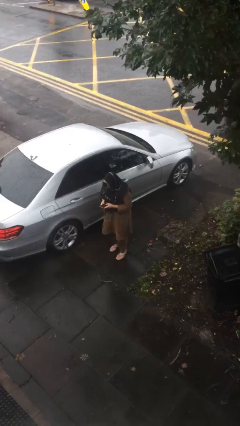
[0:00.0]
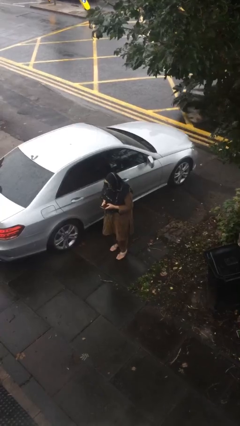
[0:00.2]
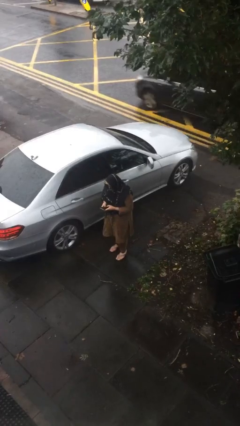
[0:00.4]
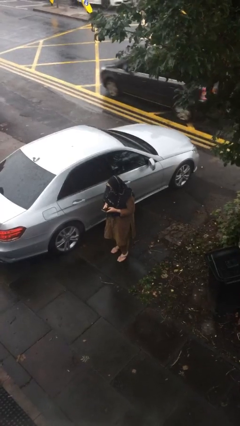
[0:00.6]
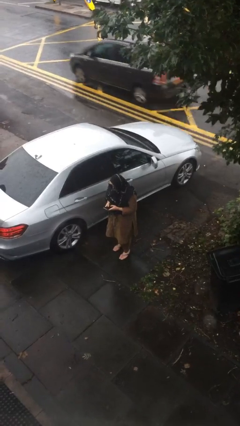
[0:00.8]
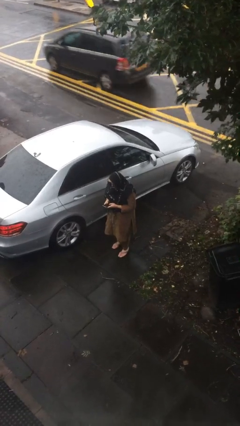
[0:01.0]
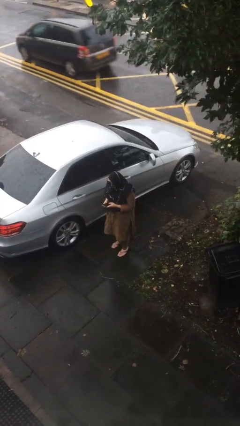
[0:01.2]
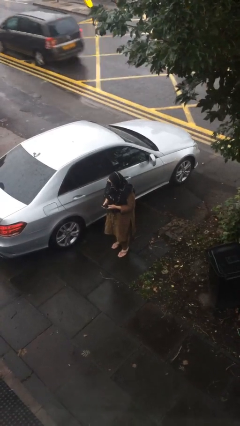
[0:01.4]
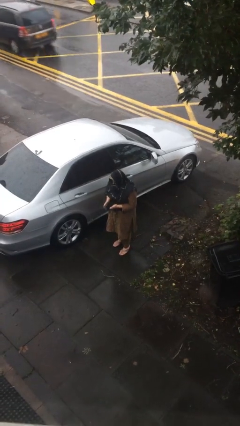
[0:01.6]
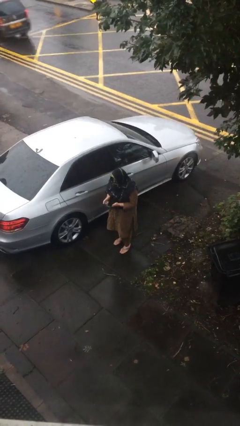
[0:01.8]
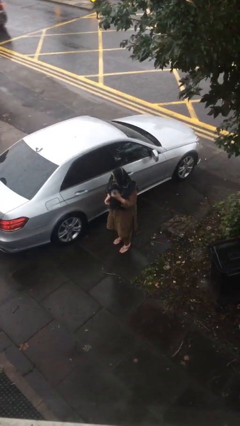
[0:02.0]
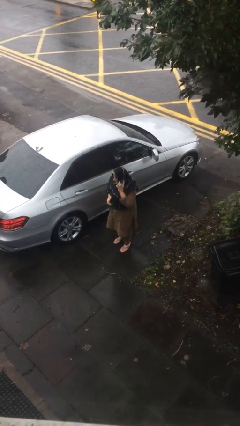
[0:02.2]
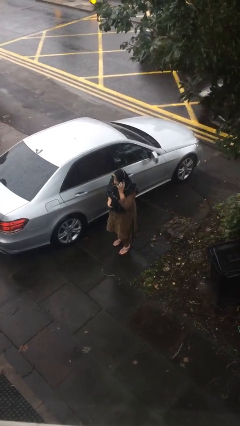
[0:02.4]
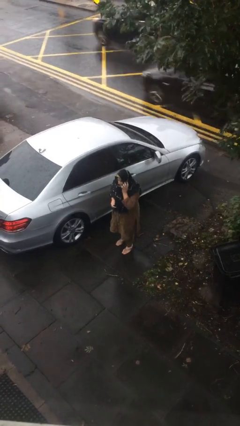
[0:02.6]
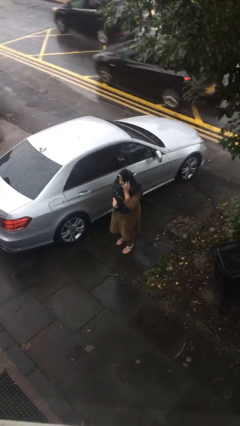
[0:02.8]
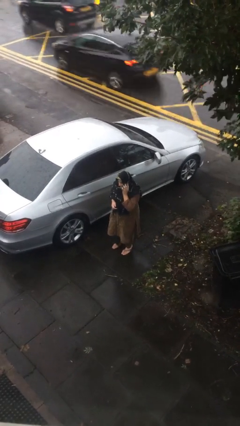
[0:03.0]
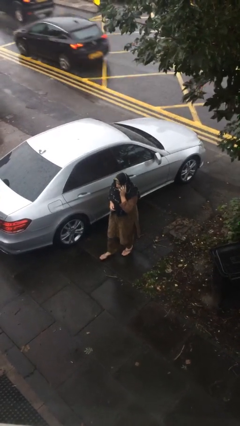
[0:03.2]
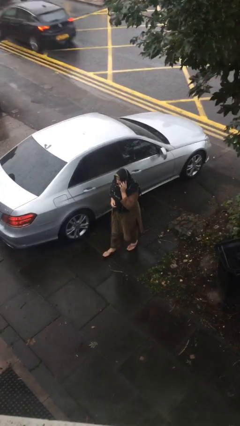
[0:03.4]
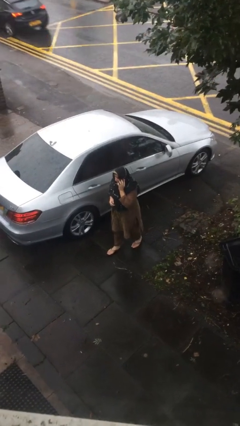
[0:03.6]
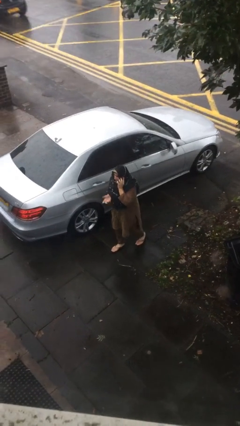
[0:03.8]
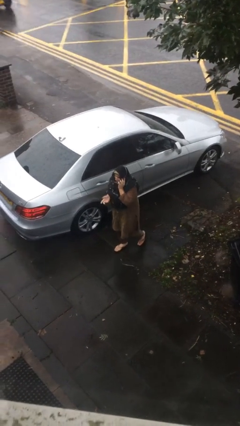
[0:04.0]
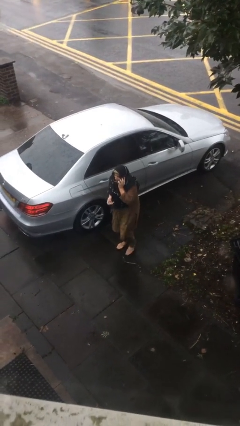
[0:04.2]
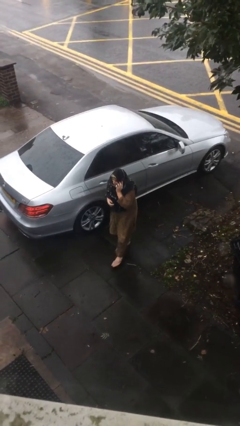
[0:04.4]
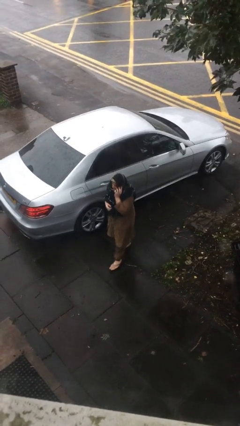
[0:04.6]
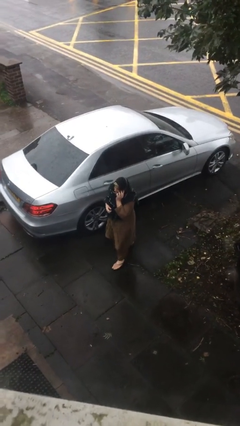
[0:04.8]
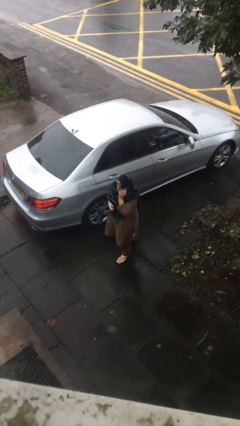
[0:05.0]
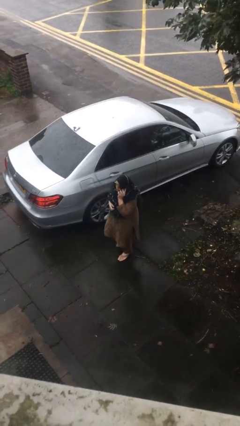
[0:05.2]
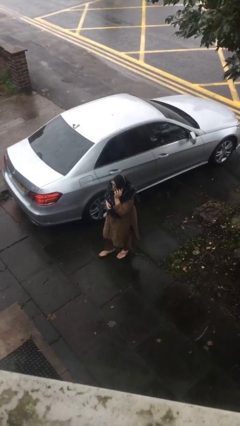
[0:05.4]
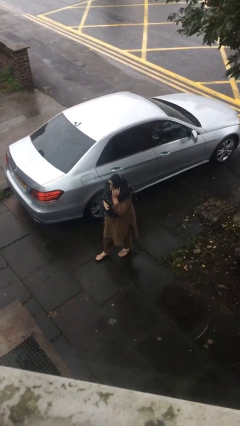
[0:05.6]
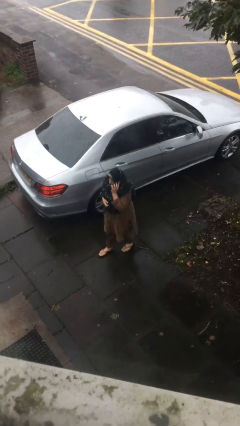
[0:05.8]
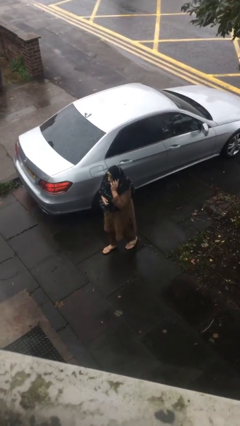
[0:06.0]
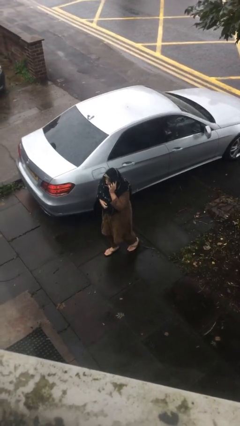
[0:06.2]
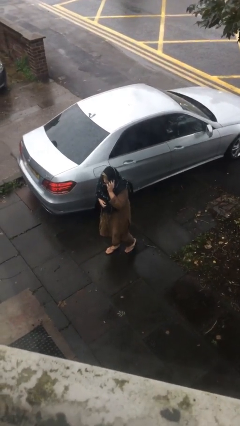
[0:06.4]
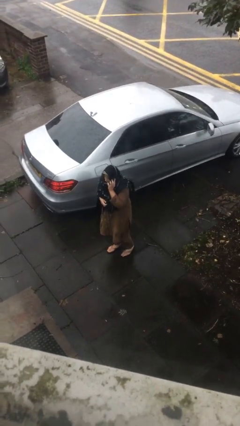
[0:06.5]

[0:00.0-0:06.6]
person talks on phone

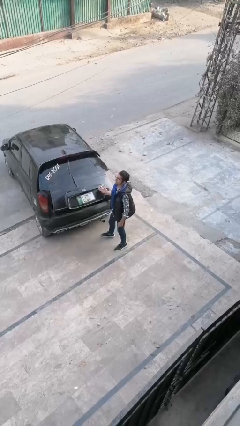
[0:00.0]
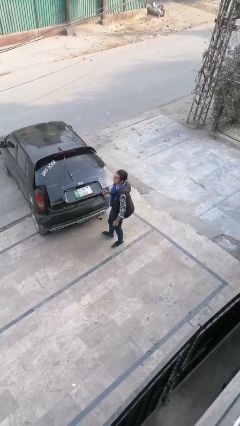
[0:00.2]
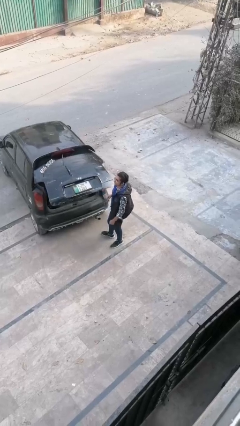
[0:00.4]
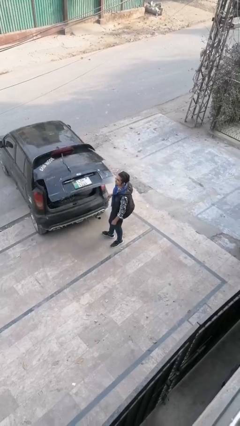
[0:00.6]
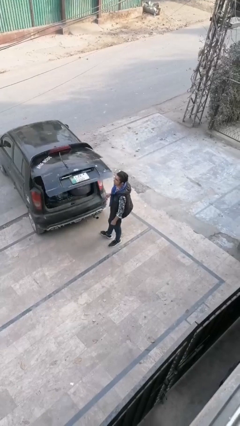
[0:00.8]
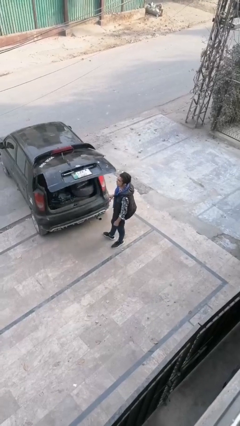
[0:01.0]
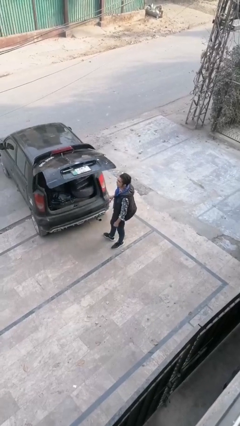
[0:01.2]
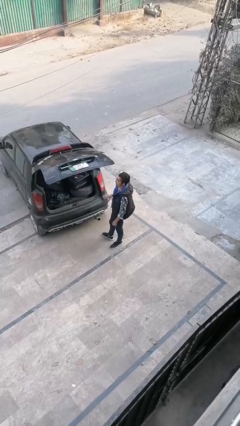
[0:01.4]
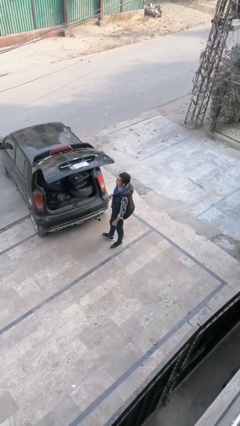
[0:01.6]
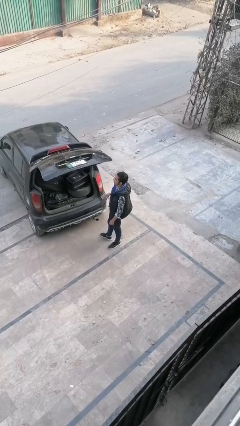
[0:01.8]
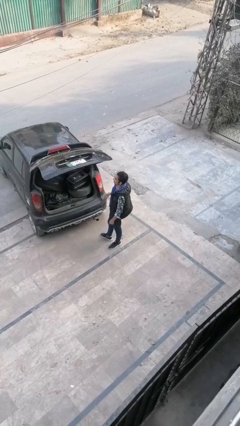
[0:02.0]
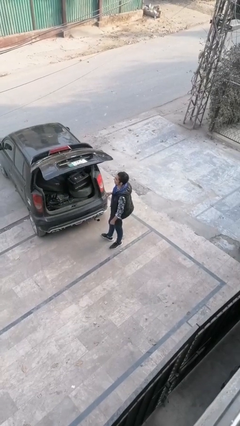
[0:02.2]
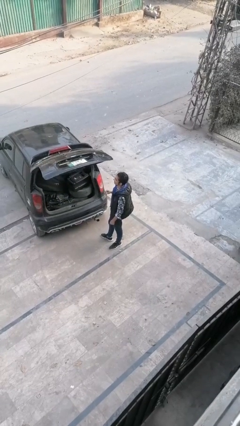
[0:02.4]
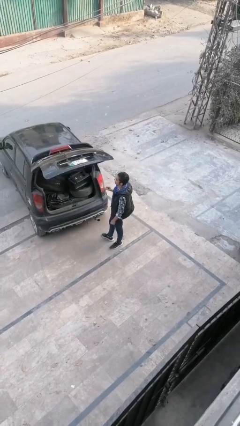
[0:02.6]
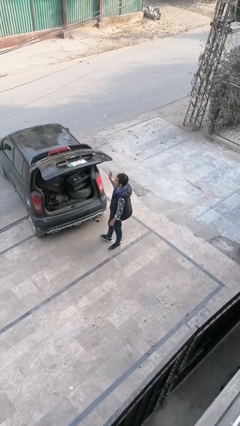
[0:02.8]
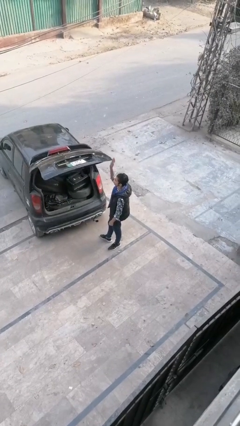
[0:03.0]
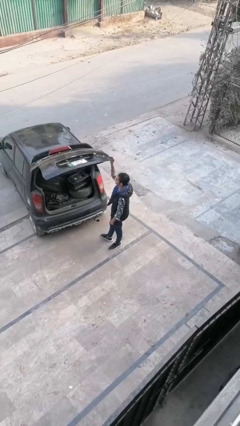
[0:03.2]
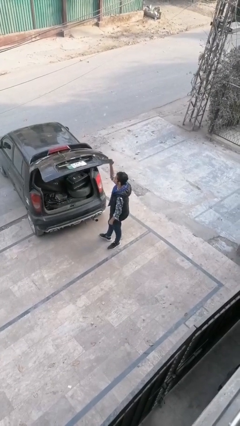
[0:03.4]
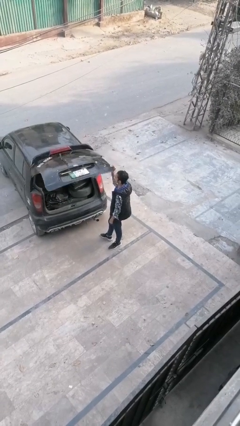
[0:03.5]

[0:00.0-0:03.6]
person opens car trunk

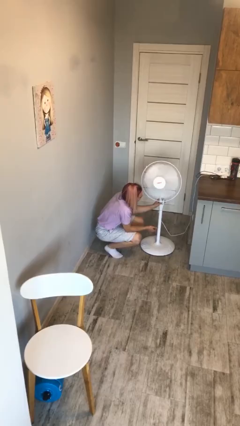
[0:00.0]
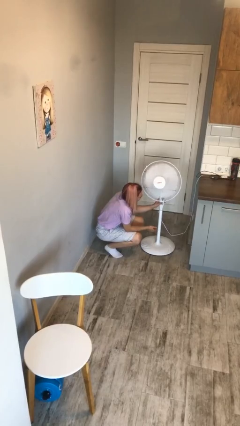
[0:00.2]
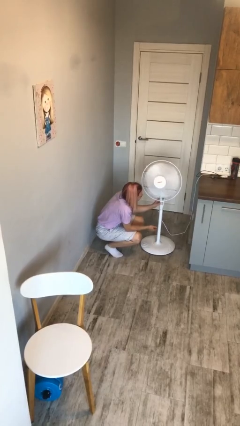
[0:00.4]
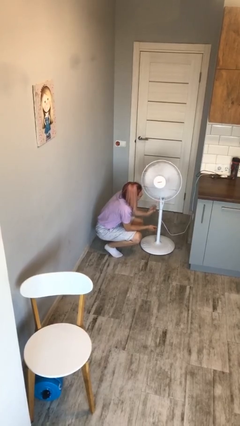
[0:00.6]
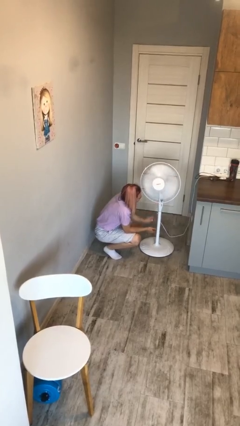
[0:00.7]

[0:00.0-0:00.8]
person turns off fan

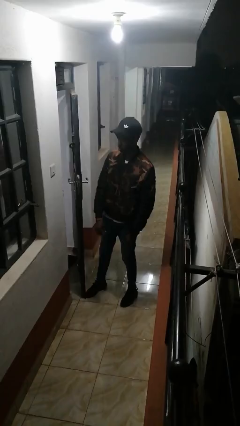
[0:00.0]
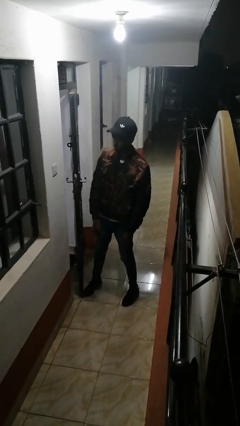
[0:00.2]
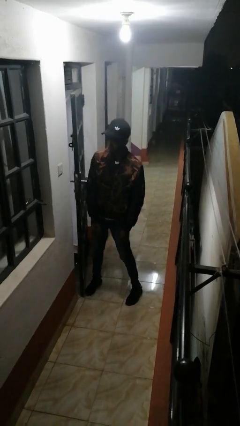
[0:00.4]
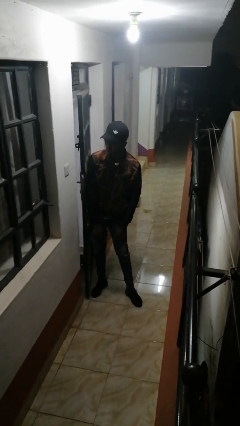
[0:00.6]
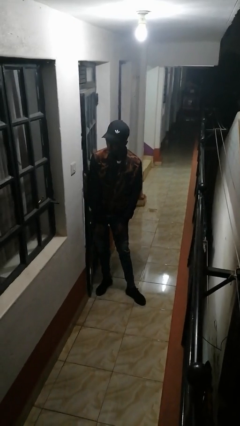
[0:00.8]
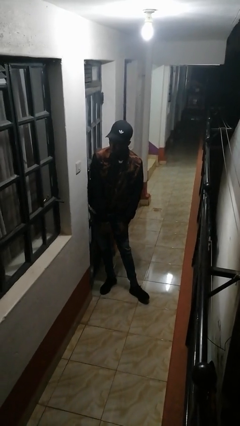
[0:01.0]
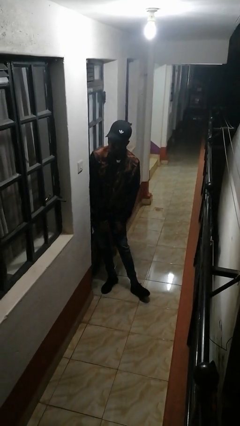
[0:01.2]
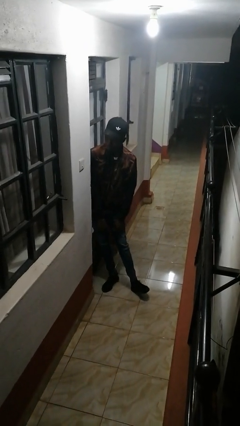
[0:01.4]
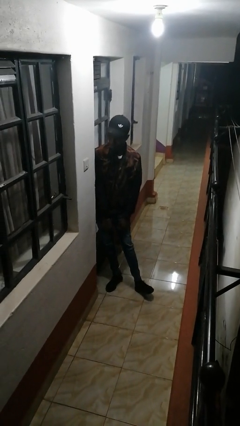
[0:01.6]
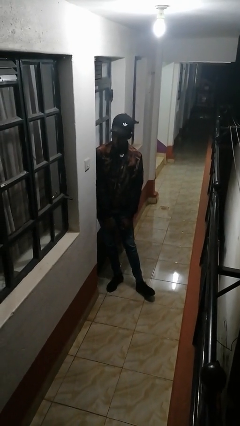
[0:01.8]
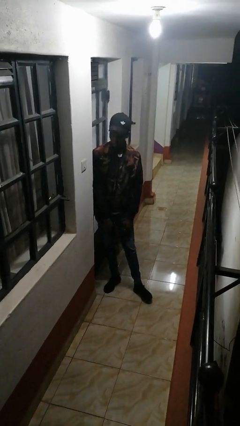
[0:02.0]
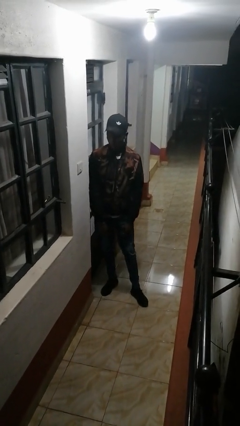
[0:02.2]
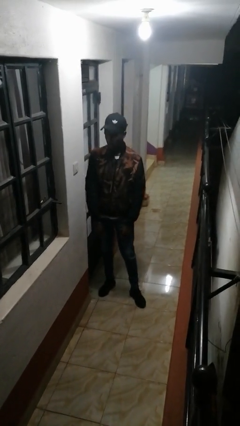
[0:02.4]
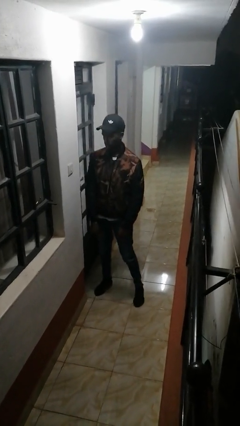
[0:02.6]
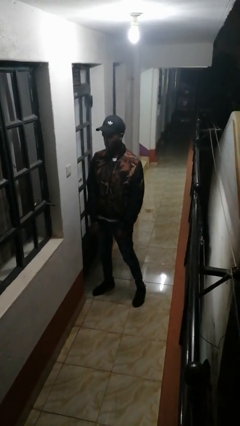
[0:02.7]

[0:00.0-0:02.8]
person closes door with hip

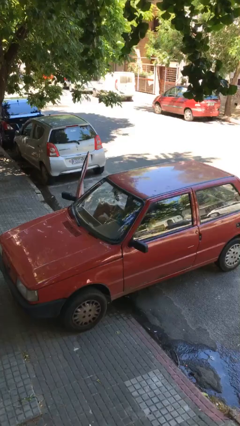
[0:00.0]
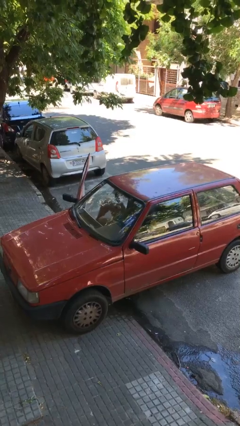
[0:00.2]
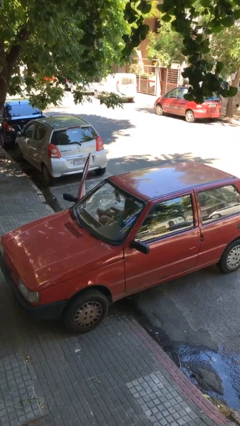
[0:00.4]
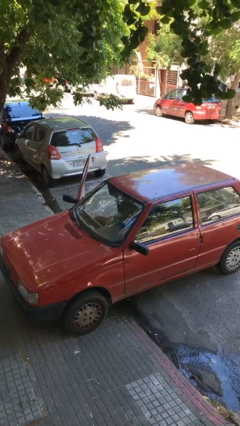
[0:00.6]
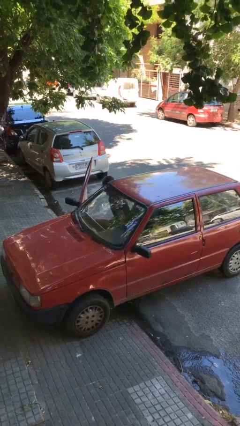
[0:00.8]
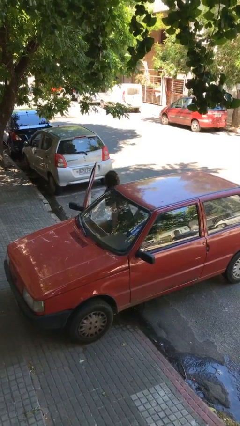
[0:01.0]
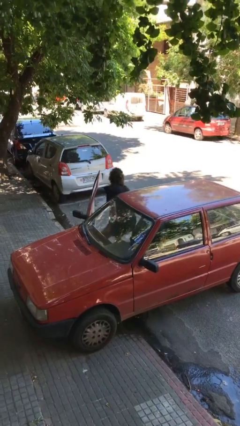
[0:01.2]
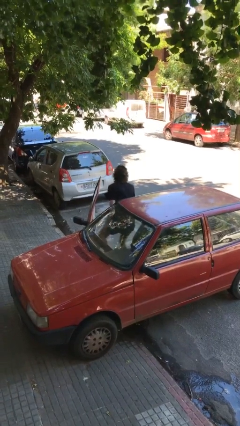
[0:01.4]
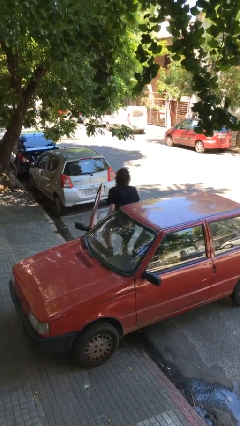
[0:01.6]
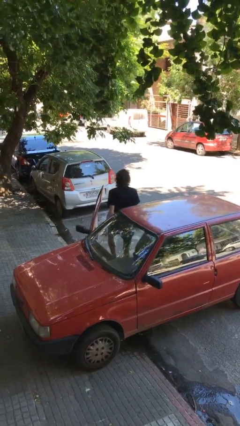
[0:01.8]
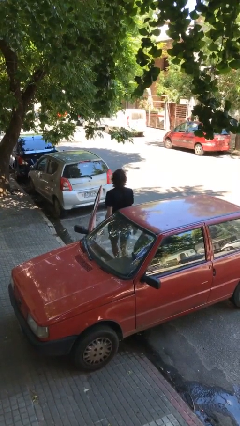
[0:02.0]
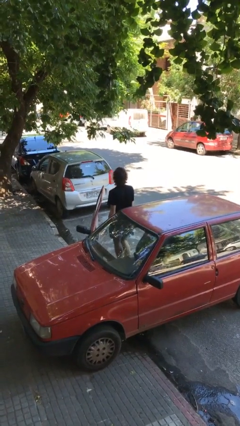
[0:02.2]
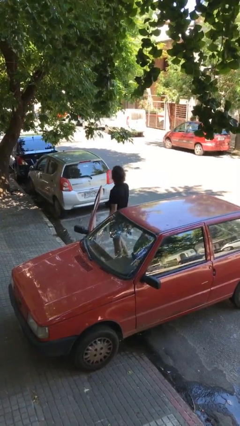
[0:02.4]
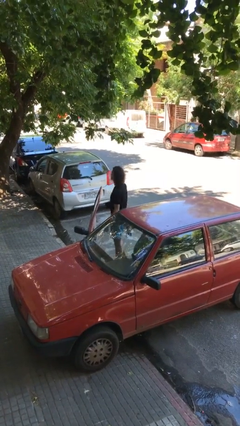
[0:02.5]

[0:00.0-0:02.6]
person exits car

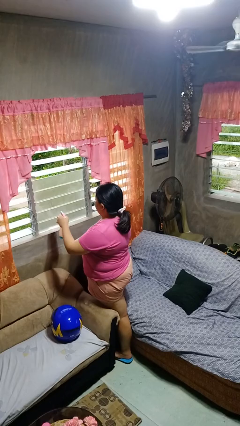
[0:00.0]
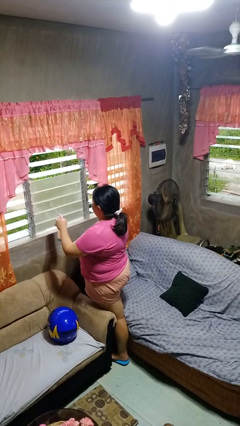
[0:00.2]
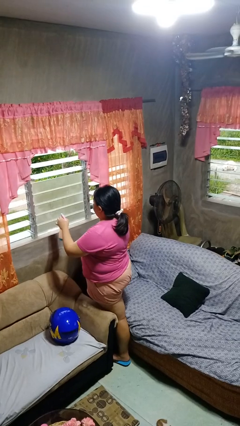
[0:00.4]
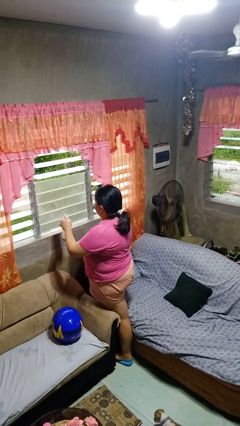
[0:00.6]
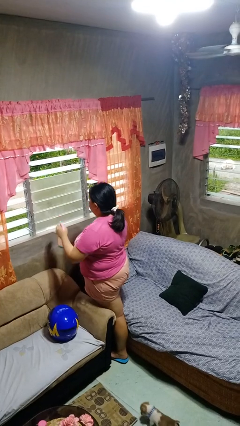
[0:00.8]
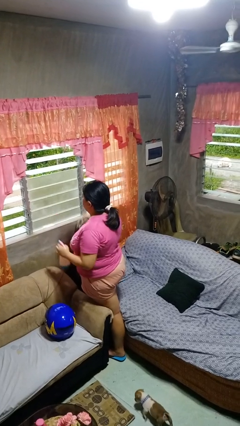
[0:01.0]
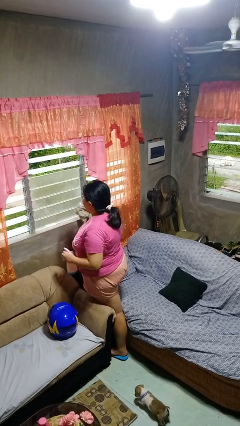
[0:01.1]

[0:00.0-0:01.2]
person sprays from bottle
